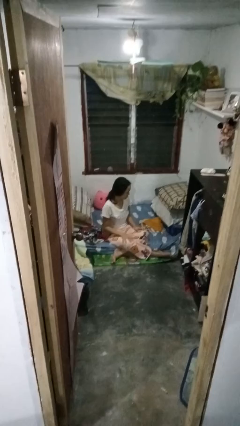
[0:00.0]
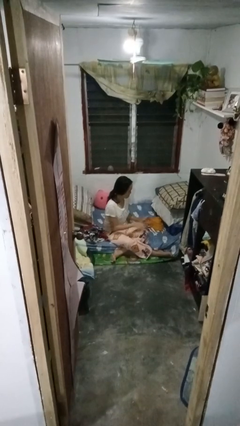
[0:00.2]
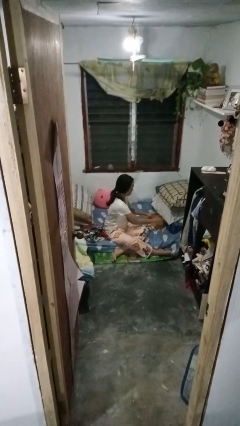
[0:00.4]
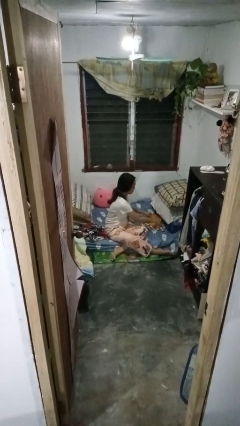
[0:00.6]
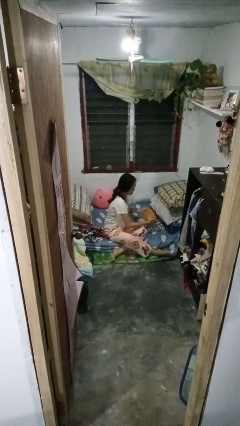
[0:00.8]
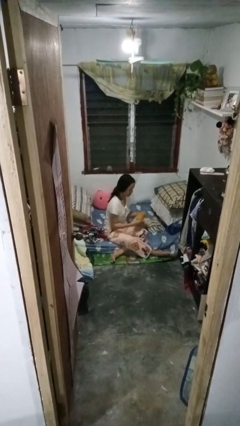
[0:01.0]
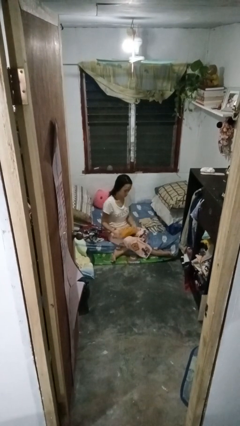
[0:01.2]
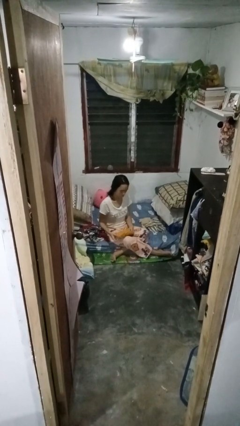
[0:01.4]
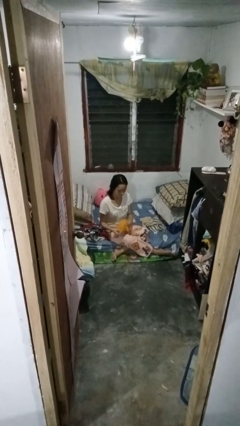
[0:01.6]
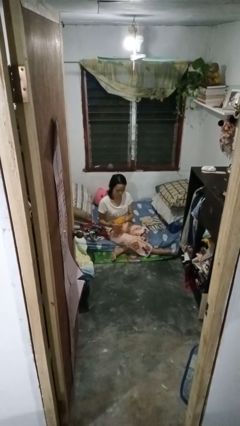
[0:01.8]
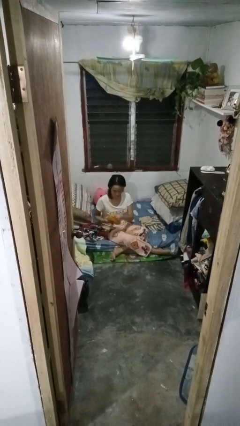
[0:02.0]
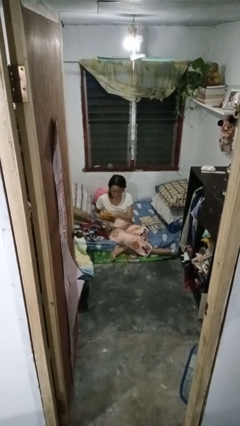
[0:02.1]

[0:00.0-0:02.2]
person folds shirt

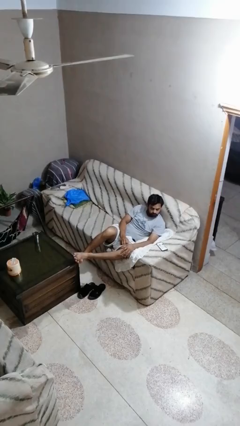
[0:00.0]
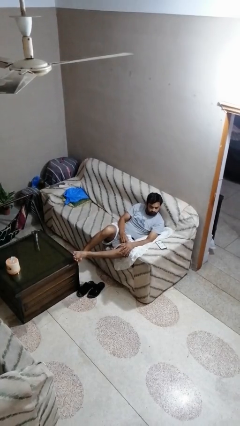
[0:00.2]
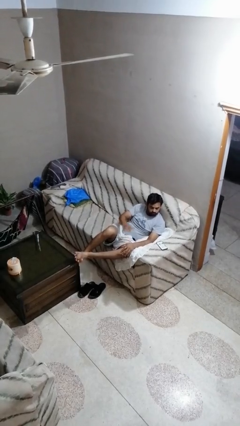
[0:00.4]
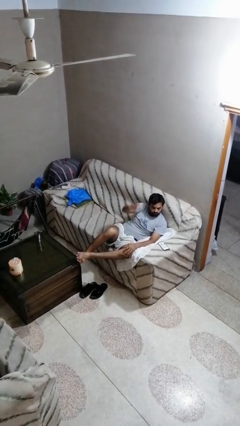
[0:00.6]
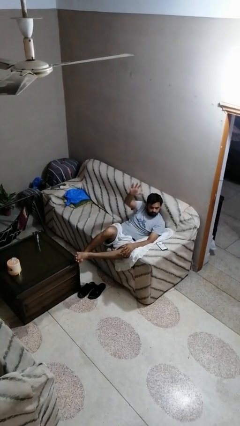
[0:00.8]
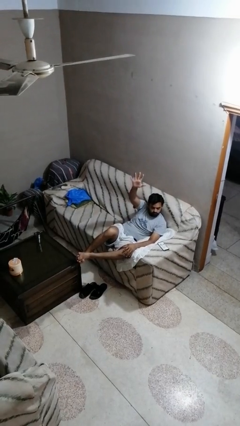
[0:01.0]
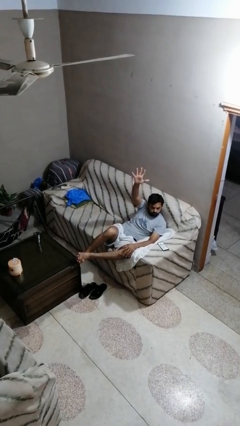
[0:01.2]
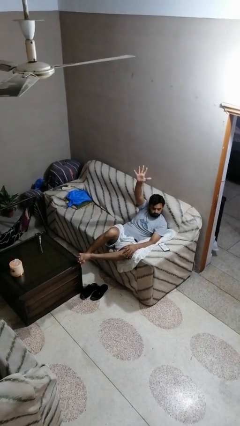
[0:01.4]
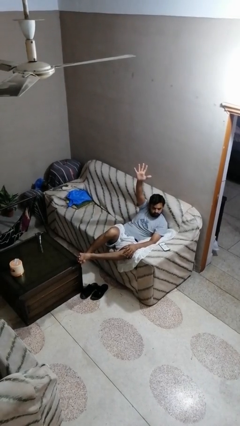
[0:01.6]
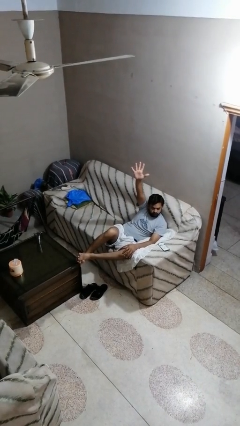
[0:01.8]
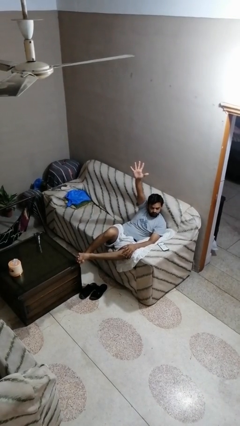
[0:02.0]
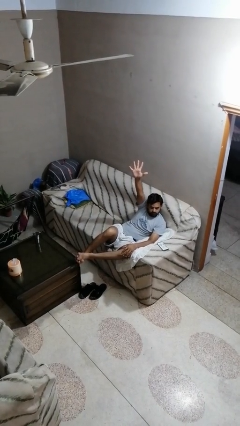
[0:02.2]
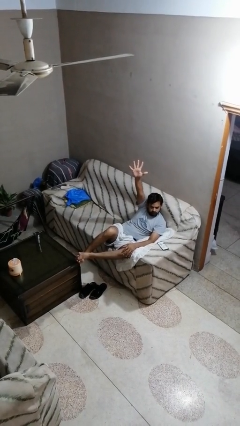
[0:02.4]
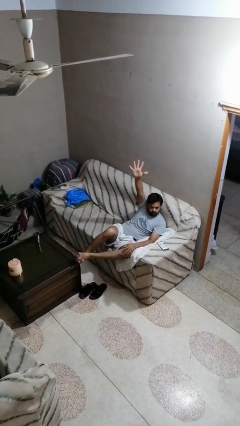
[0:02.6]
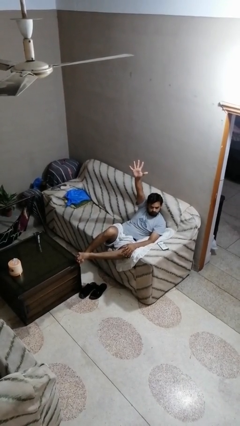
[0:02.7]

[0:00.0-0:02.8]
person gestures number five

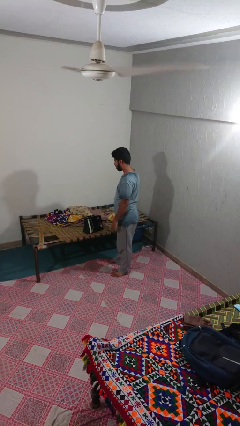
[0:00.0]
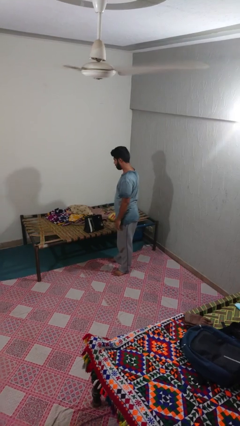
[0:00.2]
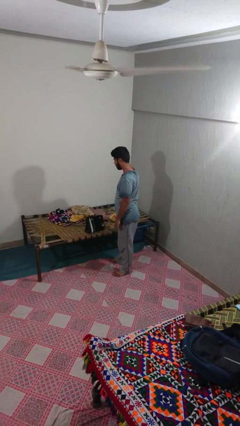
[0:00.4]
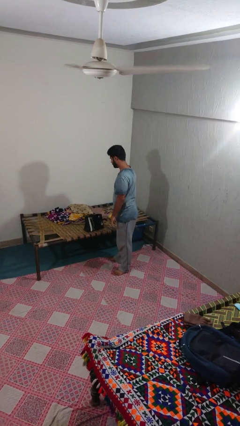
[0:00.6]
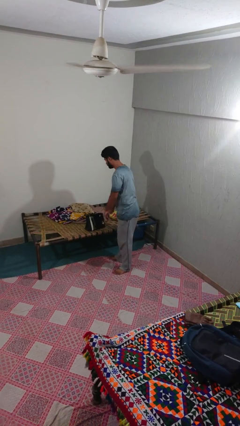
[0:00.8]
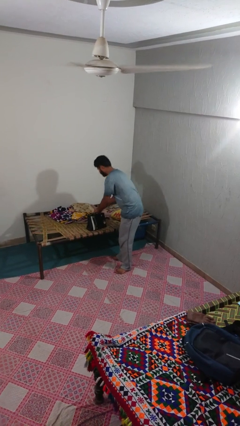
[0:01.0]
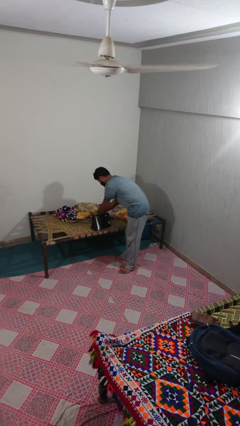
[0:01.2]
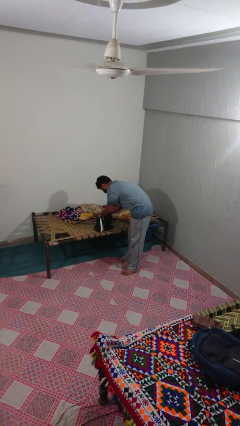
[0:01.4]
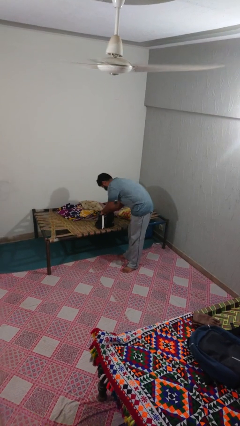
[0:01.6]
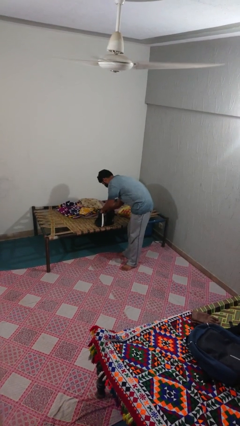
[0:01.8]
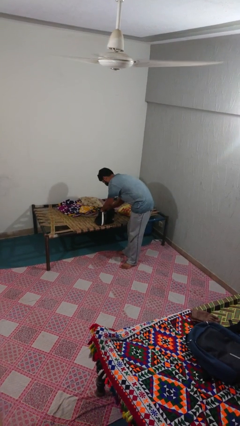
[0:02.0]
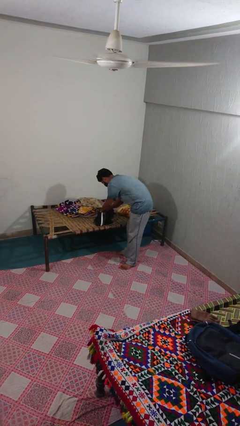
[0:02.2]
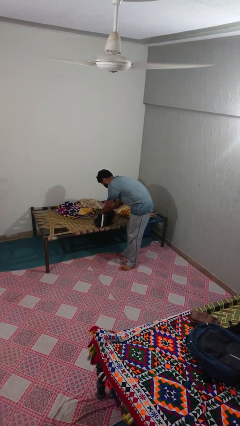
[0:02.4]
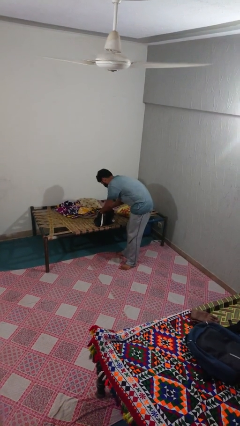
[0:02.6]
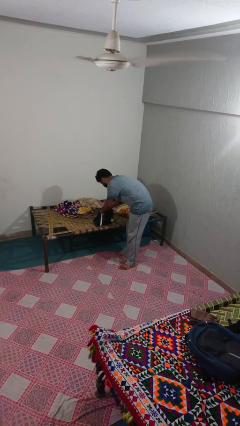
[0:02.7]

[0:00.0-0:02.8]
person searches in purse

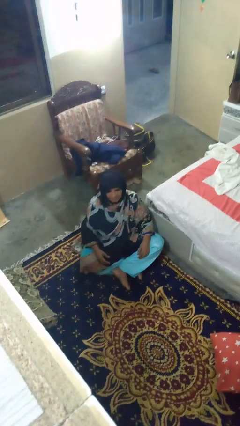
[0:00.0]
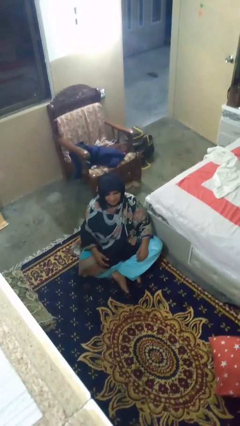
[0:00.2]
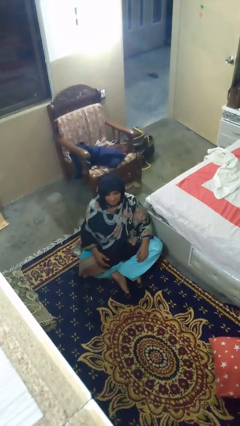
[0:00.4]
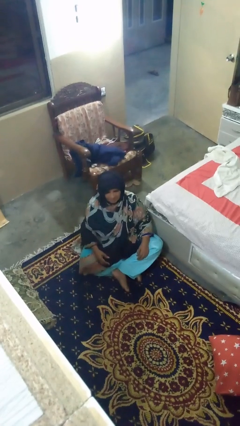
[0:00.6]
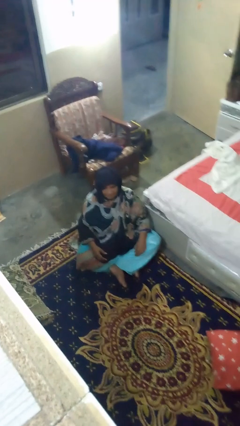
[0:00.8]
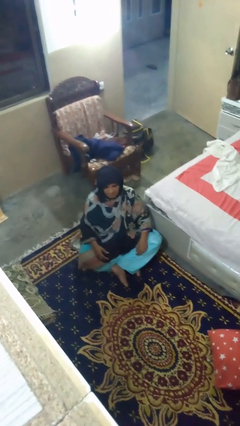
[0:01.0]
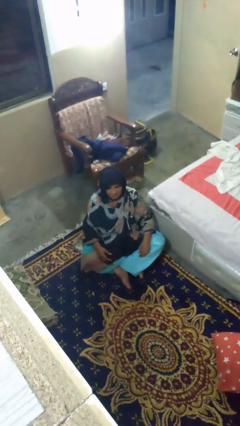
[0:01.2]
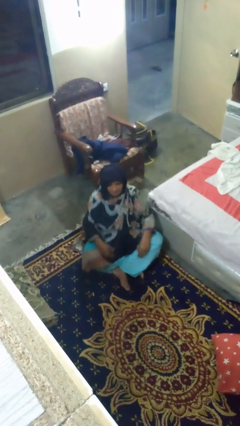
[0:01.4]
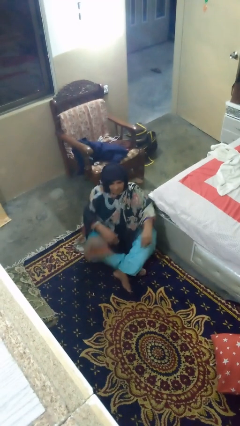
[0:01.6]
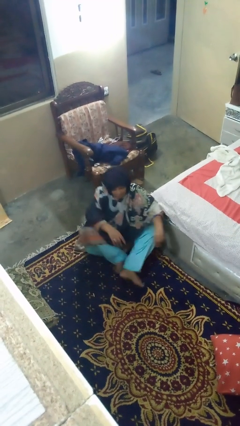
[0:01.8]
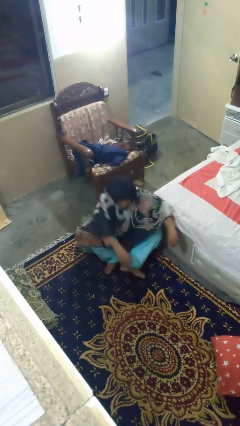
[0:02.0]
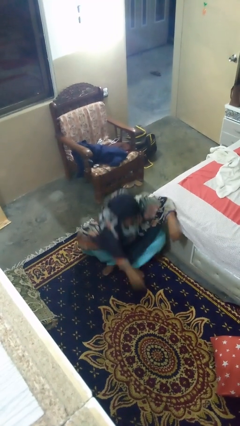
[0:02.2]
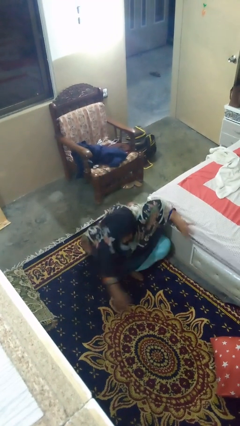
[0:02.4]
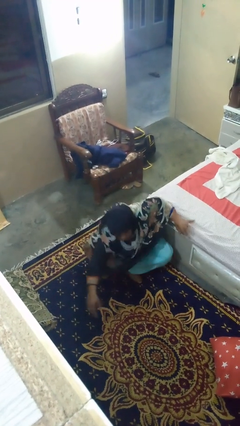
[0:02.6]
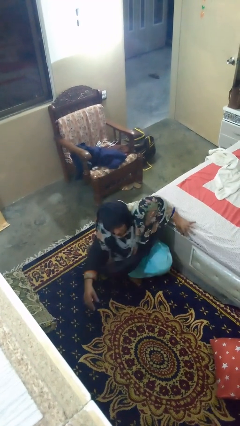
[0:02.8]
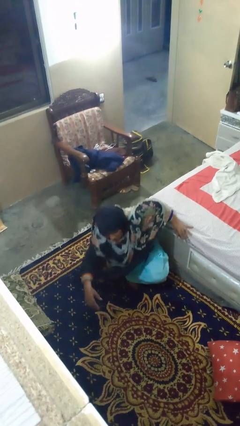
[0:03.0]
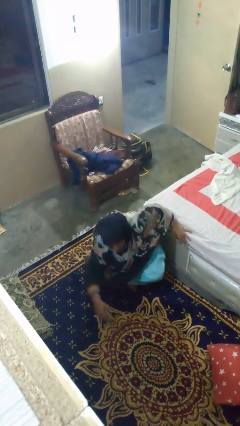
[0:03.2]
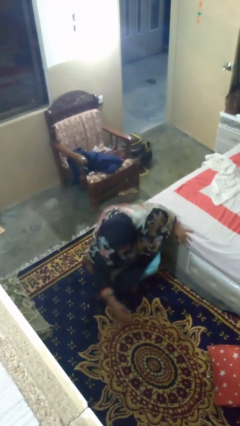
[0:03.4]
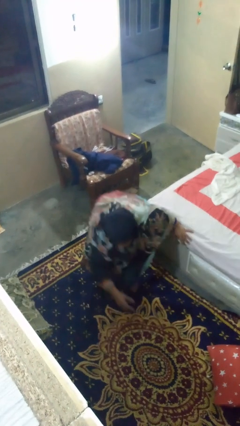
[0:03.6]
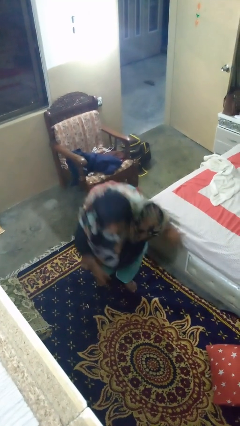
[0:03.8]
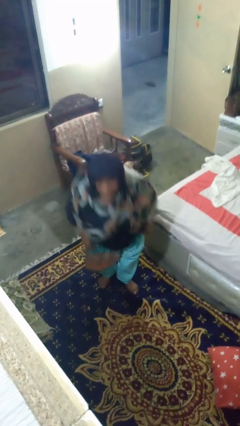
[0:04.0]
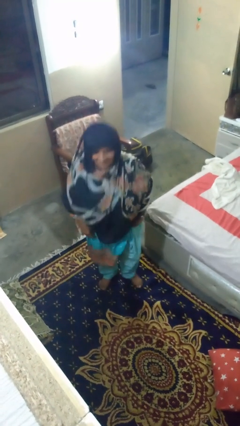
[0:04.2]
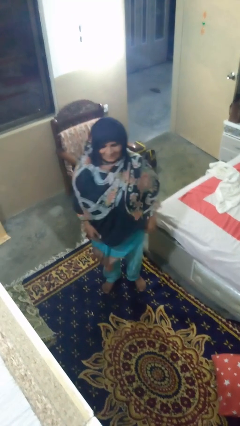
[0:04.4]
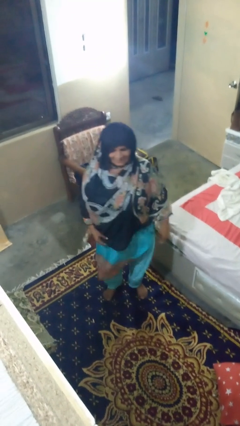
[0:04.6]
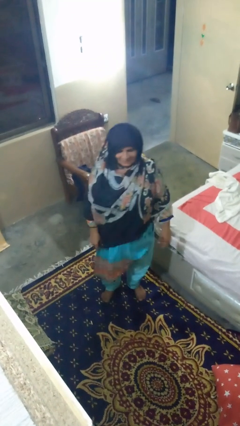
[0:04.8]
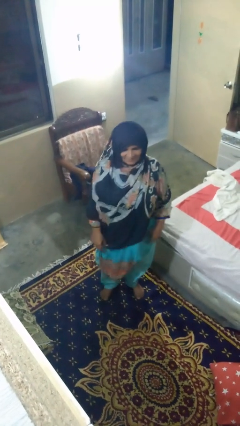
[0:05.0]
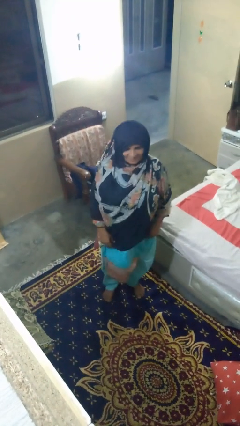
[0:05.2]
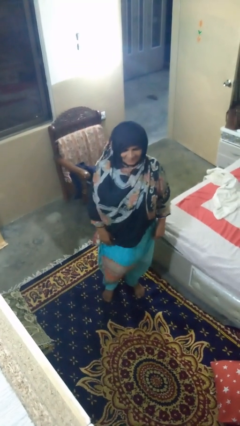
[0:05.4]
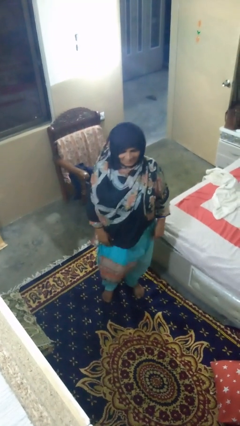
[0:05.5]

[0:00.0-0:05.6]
person stands up from floor

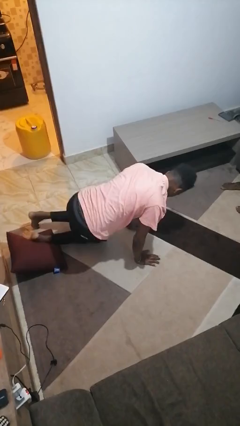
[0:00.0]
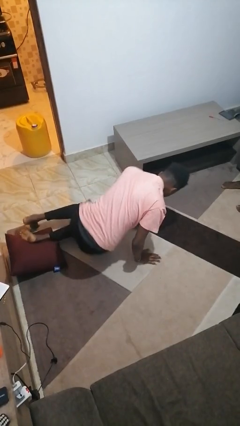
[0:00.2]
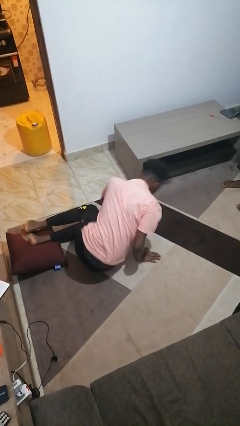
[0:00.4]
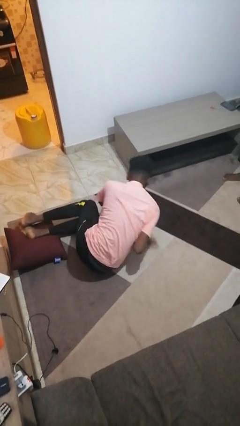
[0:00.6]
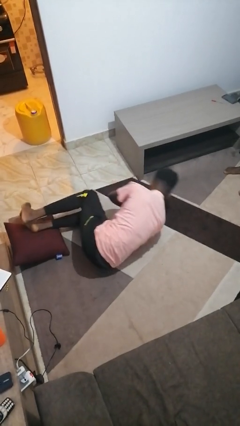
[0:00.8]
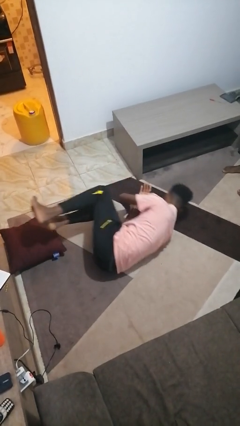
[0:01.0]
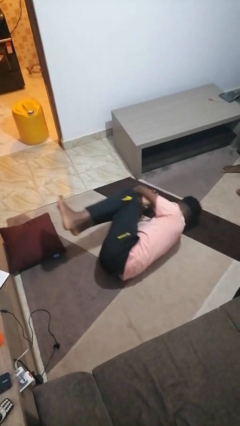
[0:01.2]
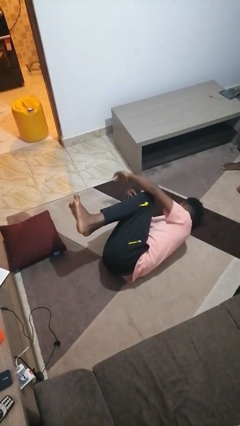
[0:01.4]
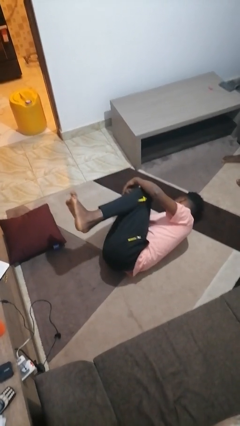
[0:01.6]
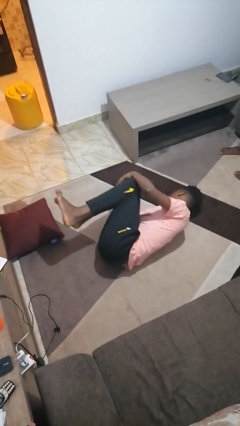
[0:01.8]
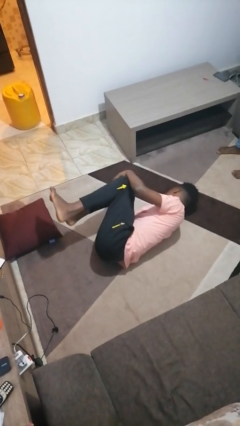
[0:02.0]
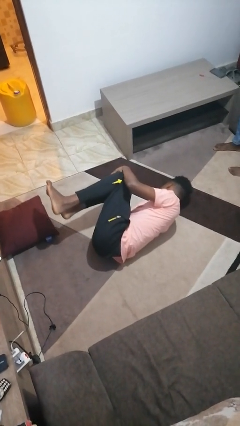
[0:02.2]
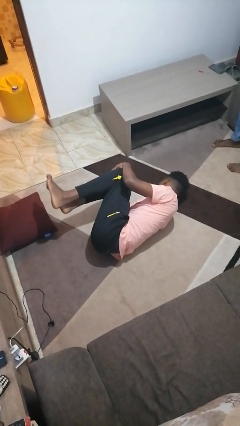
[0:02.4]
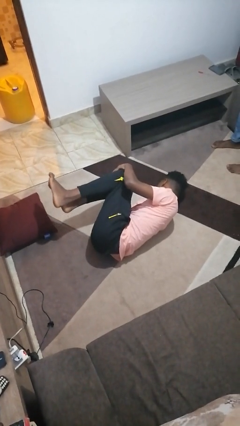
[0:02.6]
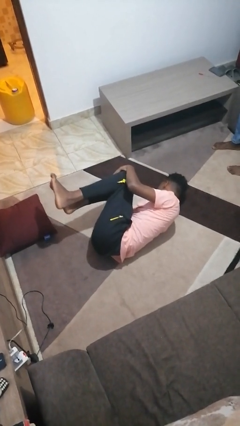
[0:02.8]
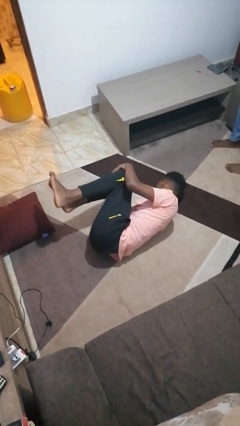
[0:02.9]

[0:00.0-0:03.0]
person lies down on floor

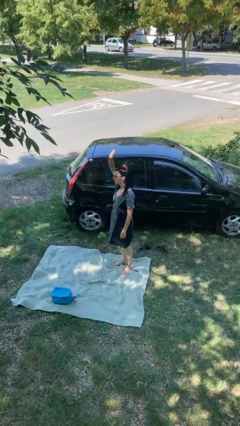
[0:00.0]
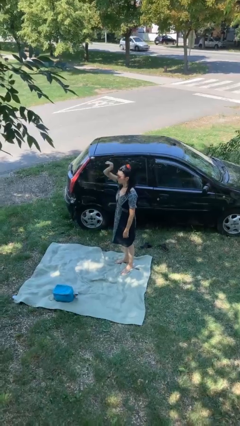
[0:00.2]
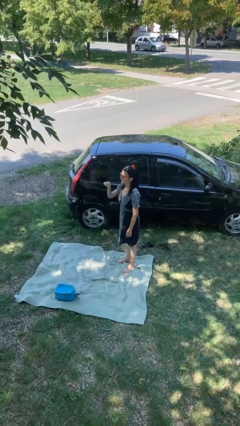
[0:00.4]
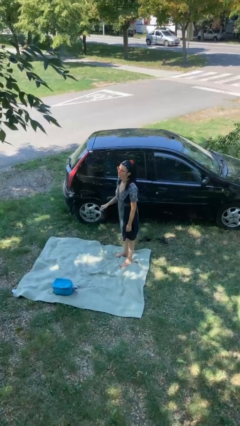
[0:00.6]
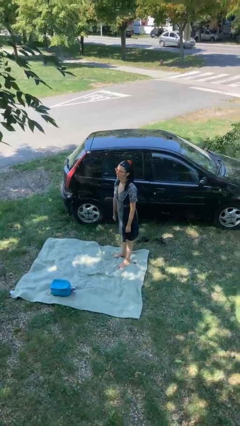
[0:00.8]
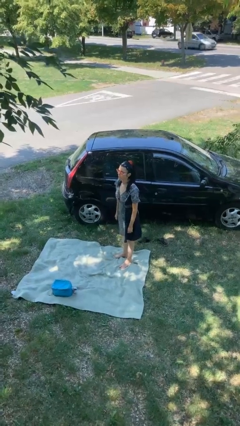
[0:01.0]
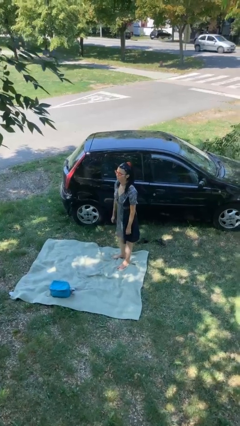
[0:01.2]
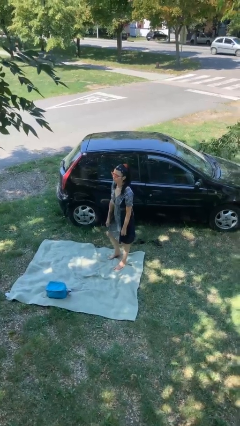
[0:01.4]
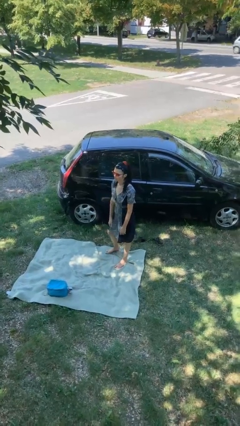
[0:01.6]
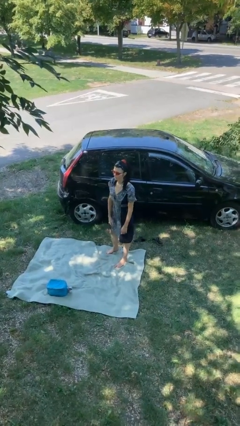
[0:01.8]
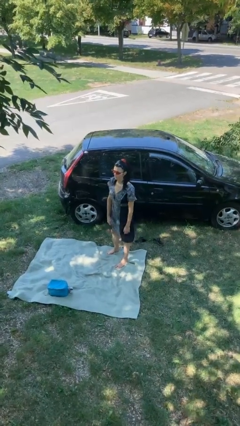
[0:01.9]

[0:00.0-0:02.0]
person gestures lower hand
